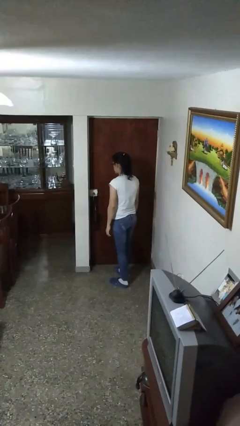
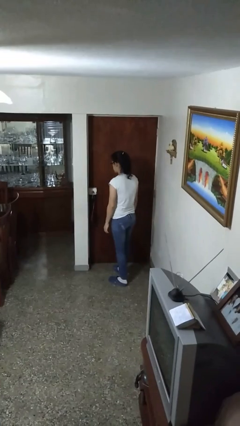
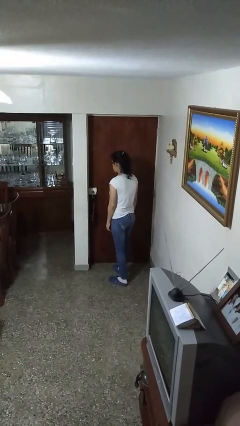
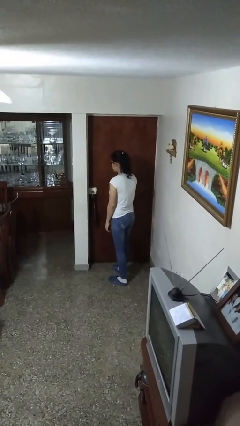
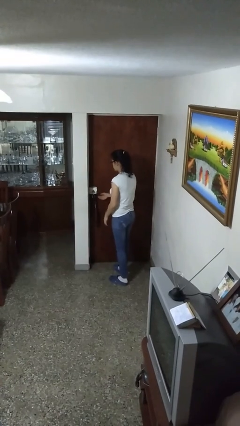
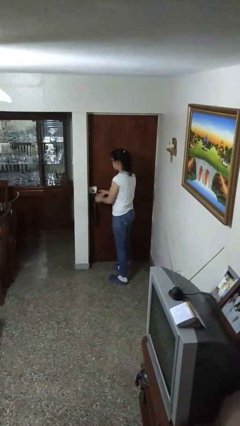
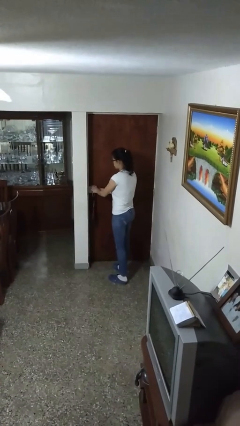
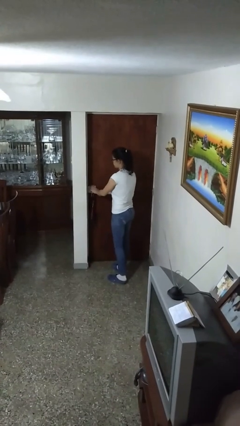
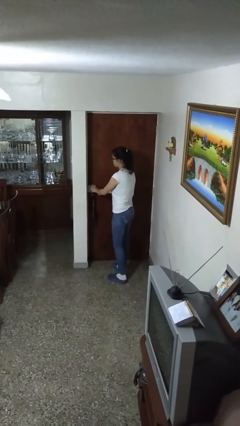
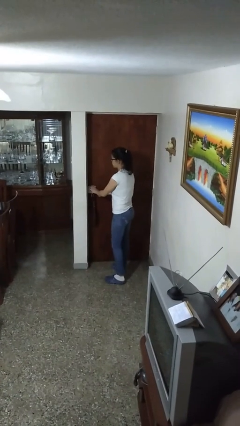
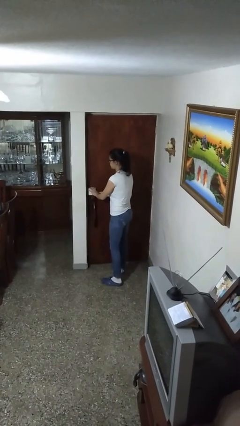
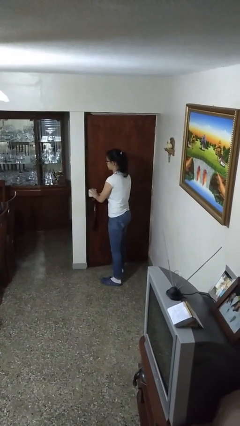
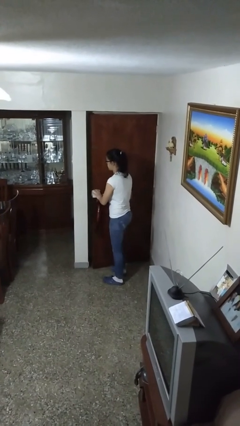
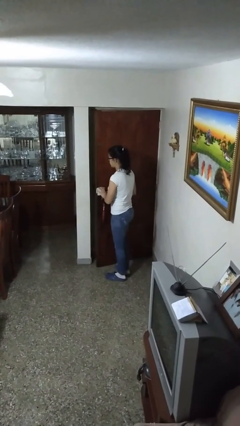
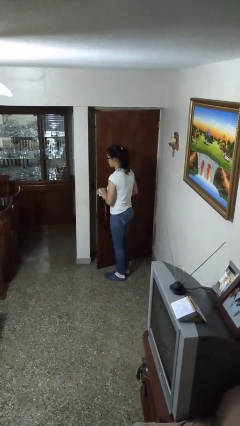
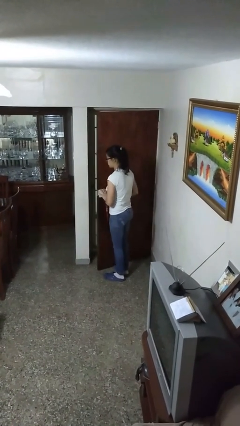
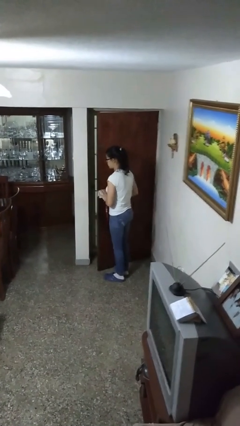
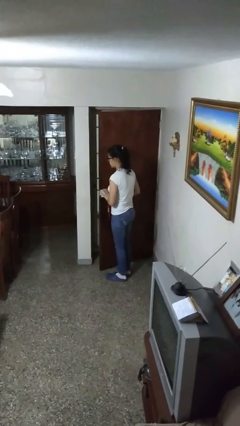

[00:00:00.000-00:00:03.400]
person opens facility door

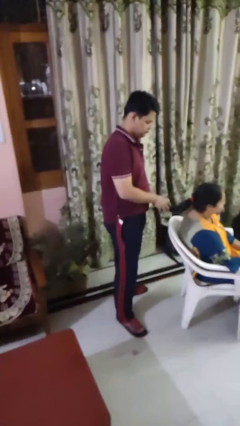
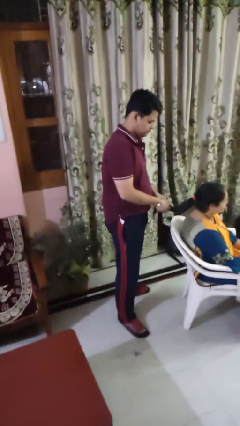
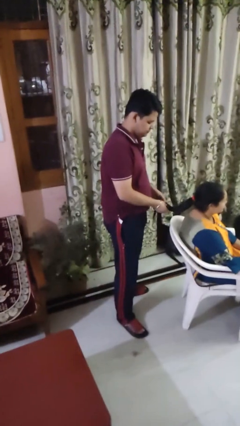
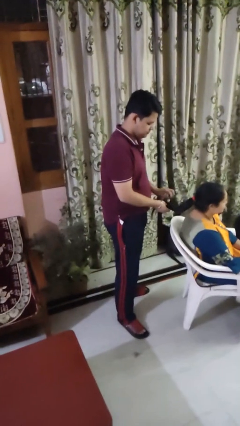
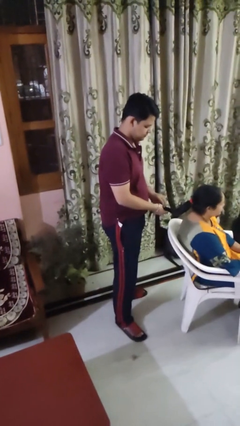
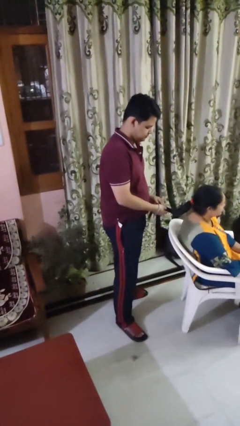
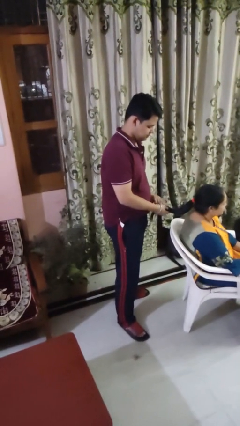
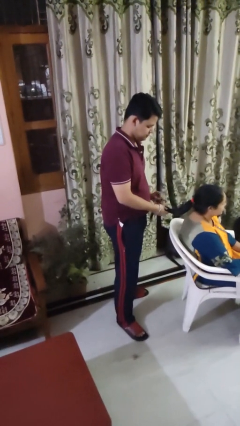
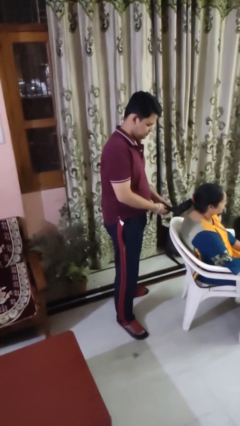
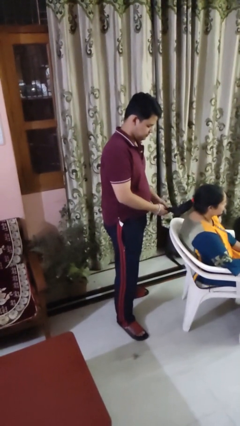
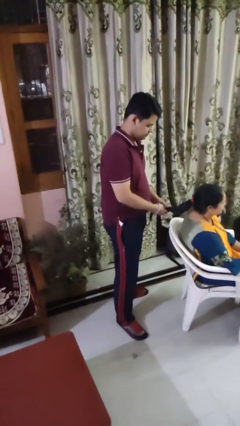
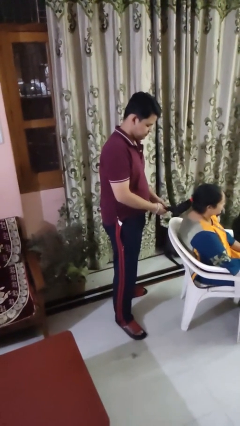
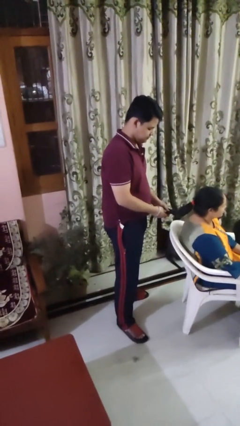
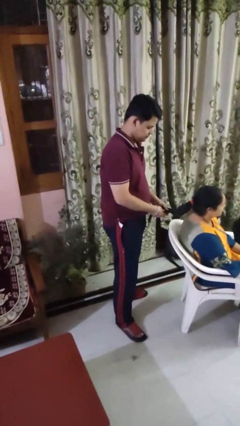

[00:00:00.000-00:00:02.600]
person braids hair of person

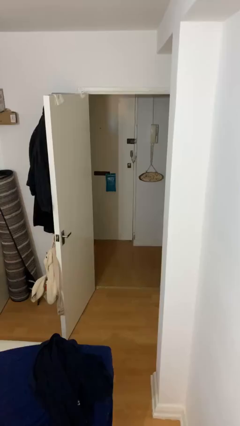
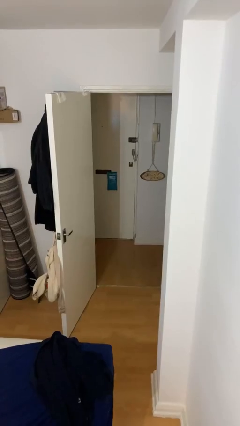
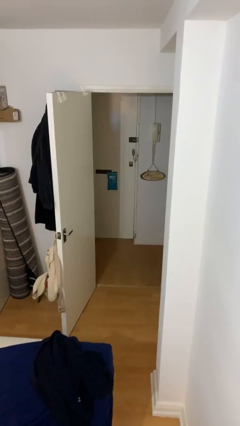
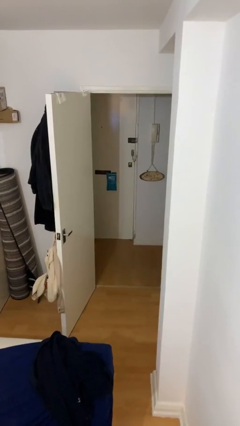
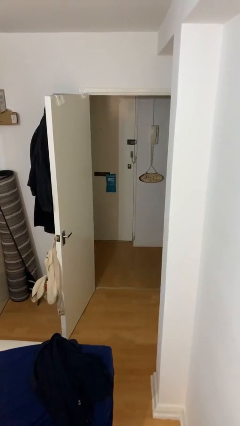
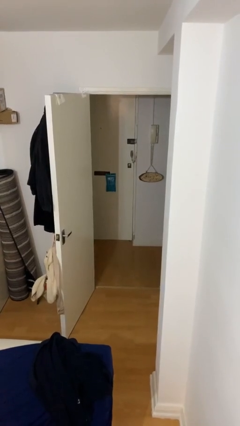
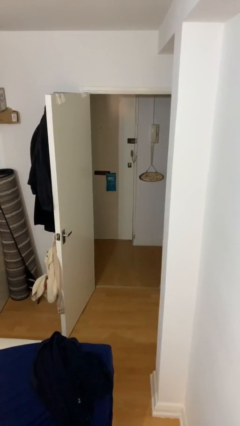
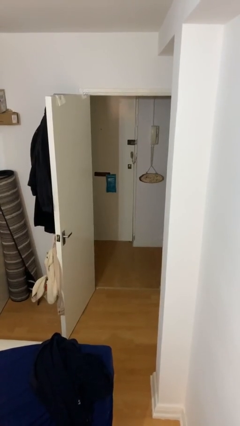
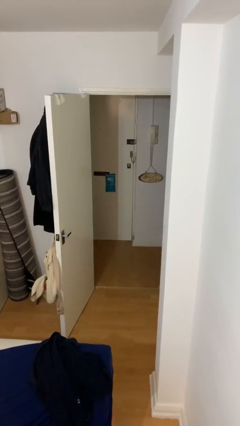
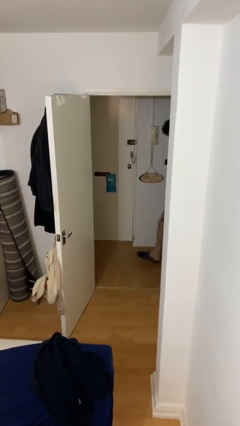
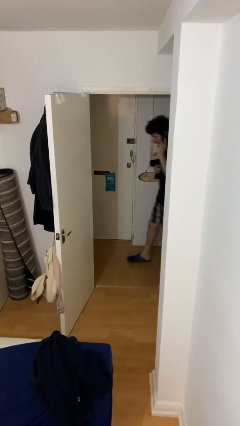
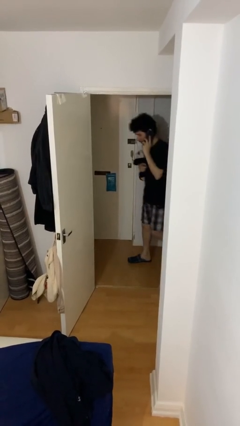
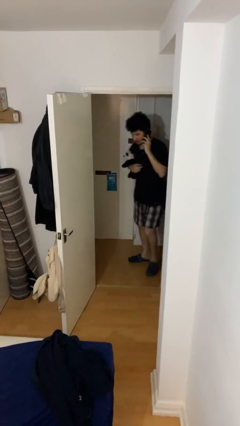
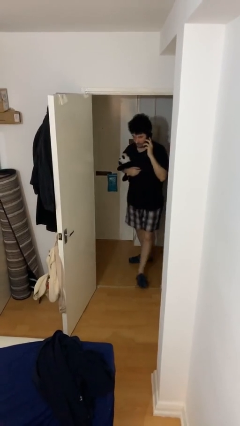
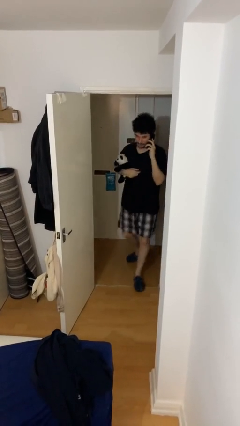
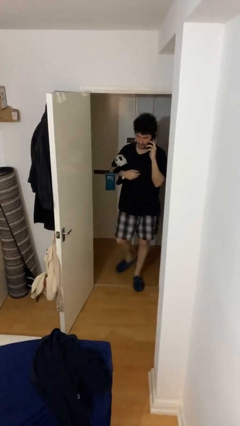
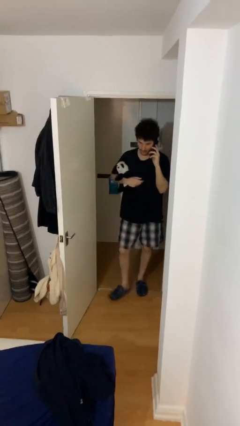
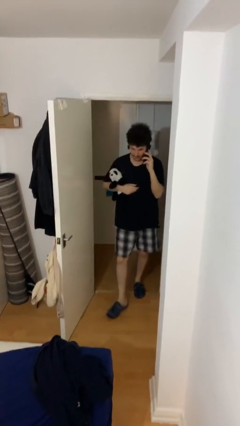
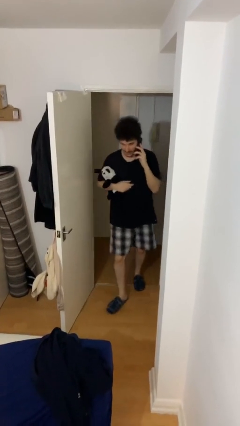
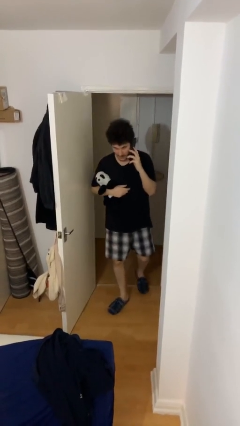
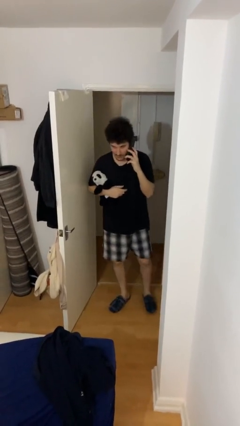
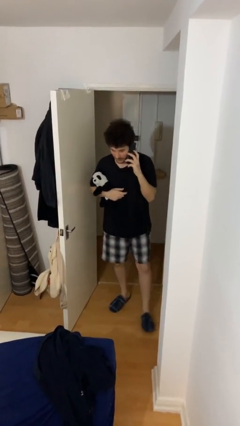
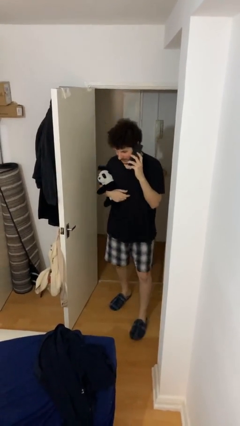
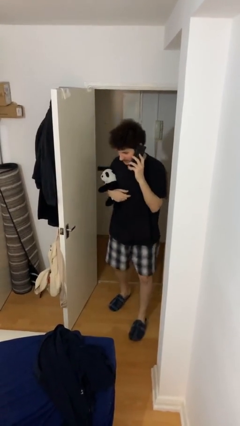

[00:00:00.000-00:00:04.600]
person enters scene through structure

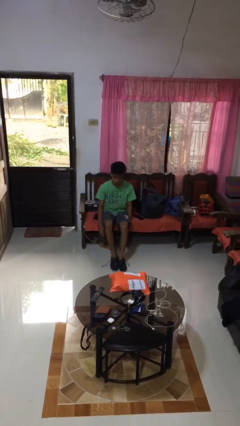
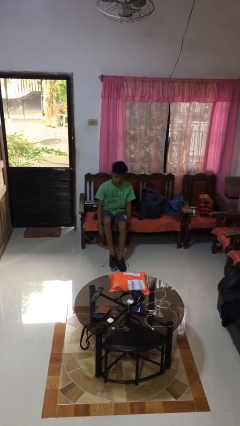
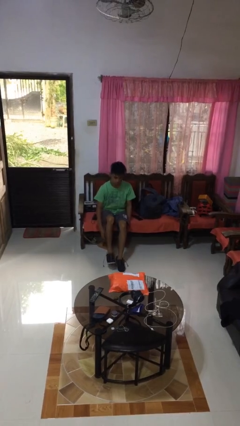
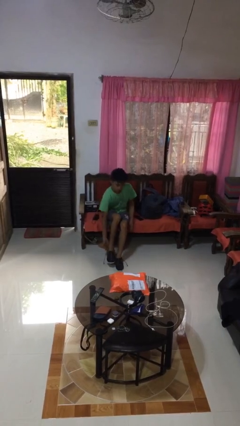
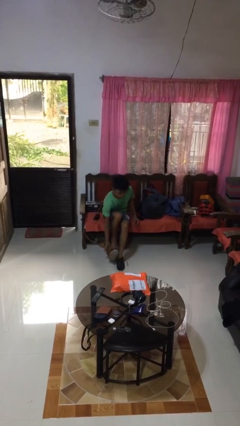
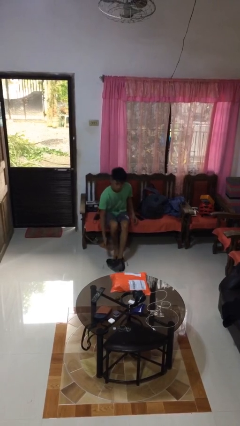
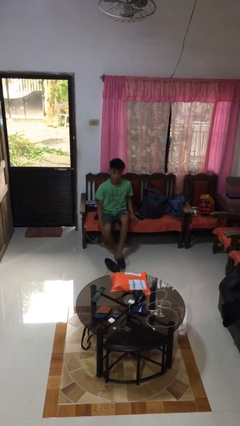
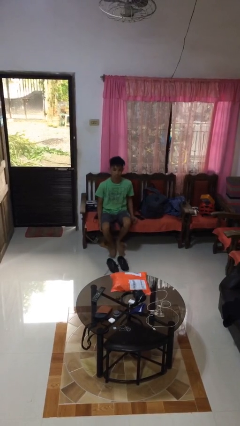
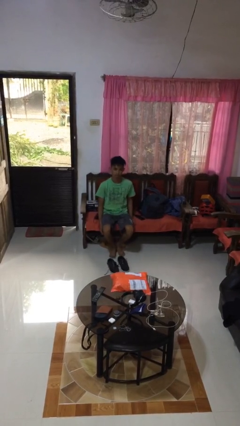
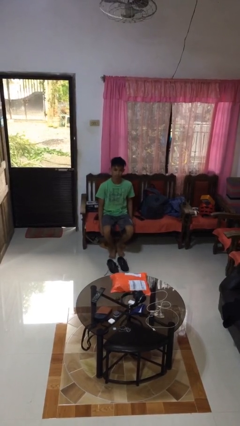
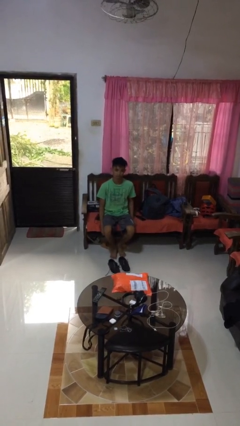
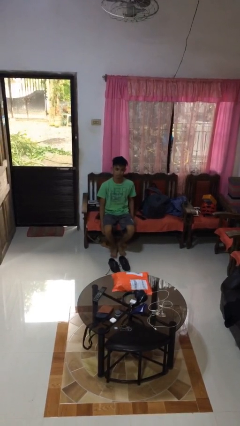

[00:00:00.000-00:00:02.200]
person takes off shoes

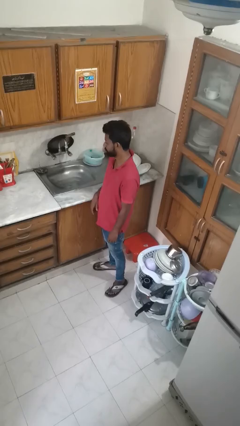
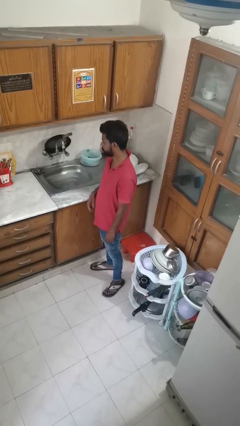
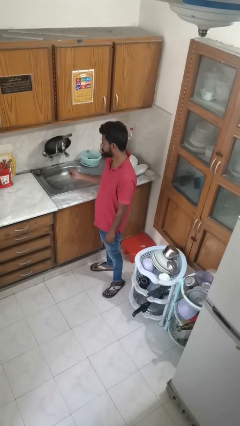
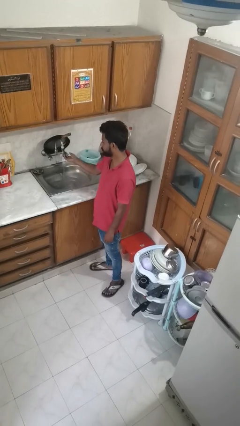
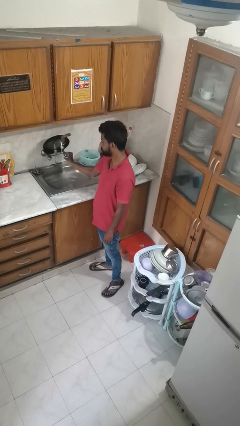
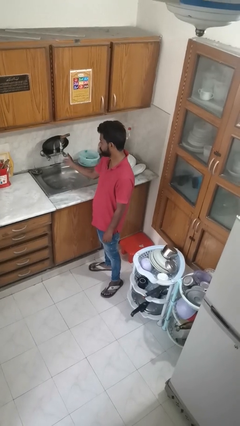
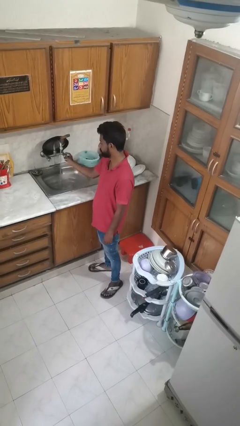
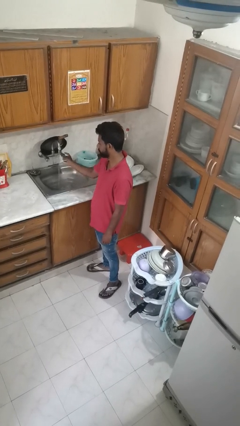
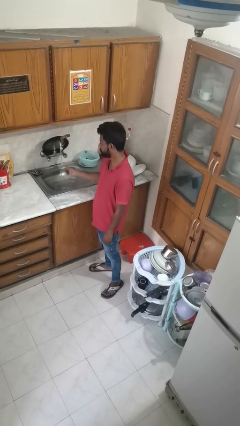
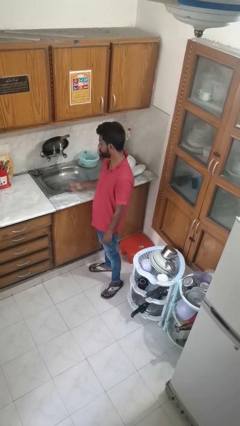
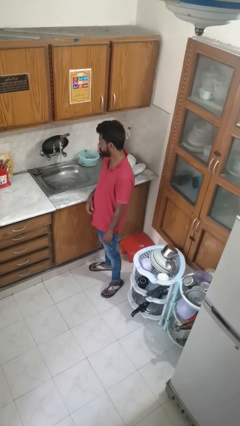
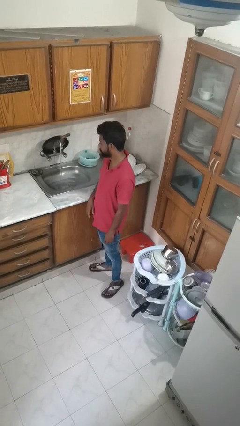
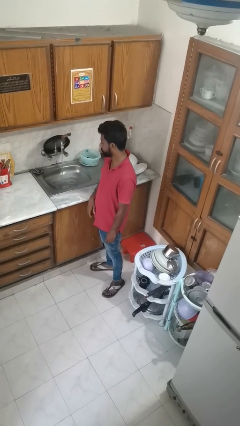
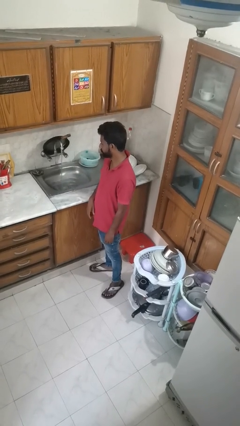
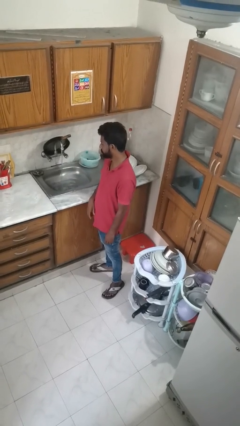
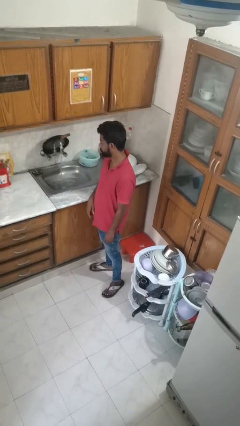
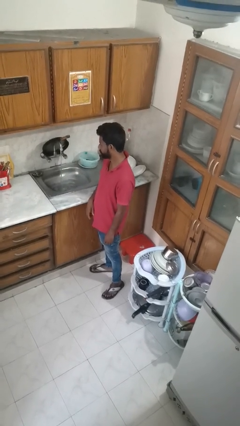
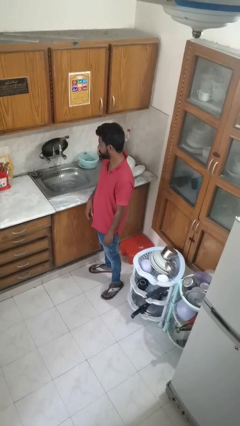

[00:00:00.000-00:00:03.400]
person turns on faucet

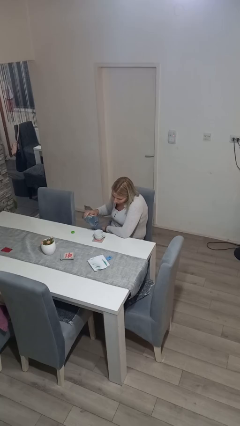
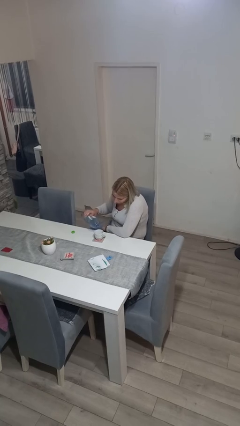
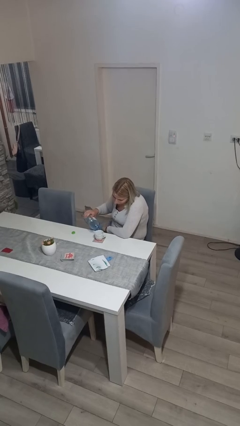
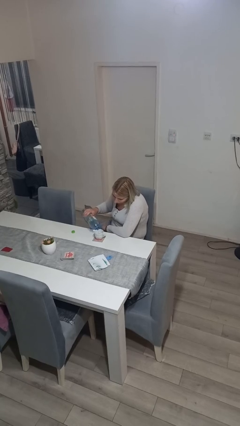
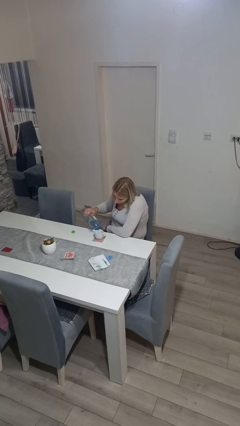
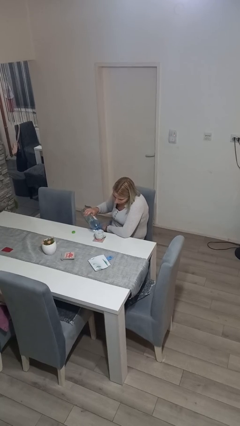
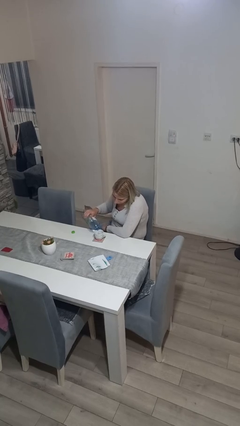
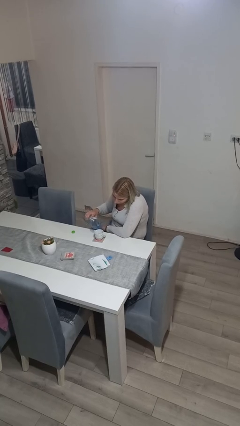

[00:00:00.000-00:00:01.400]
person pours liquid into cup
